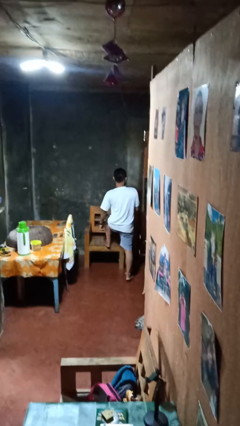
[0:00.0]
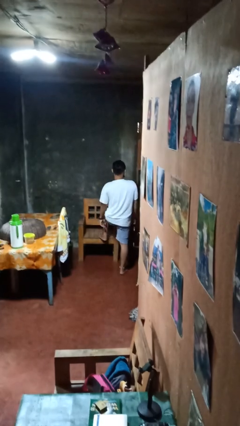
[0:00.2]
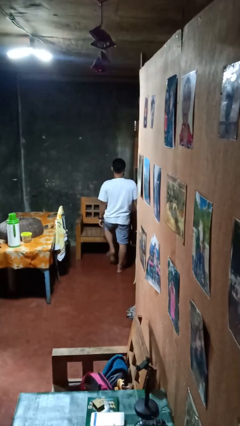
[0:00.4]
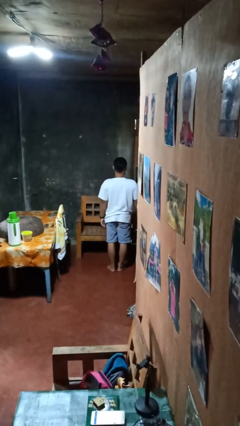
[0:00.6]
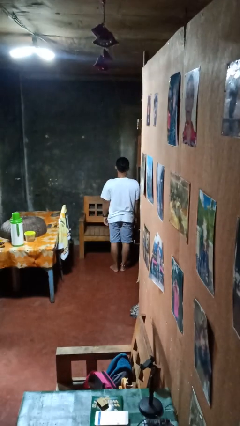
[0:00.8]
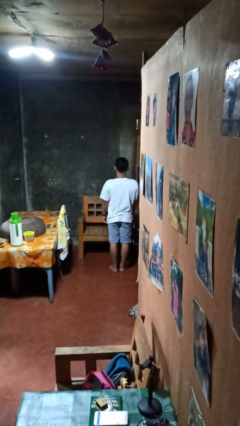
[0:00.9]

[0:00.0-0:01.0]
person climbs off chair

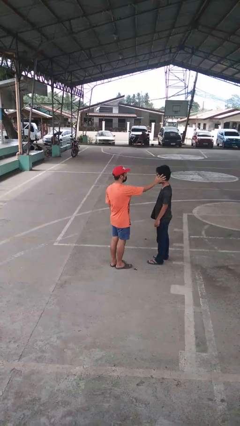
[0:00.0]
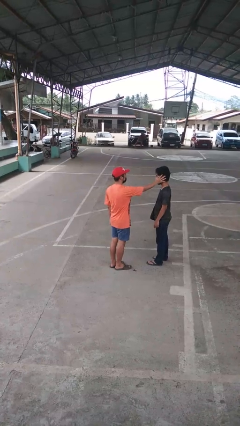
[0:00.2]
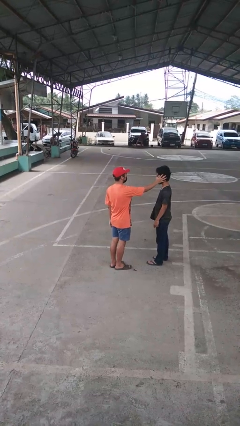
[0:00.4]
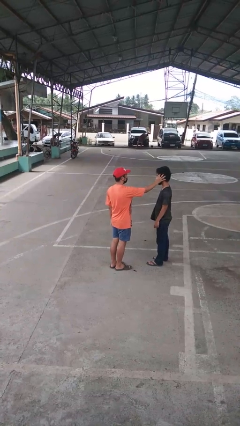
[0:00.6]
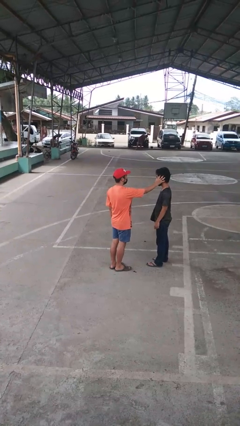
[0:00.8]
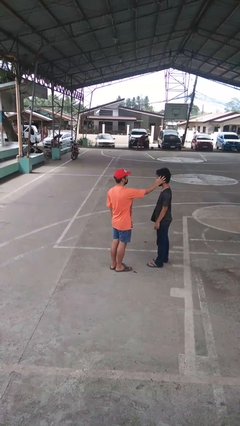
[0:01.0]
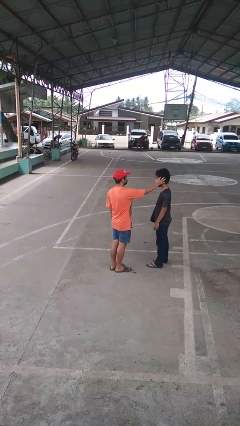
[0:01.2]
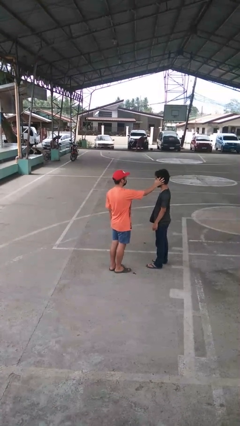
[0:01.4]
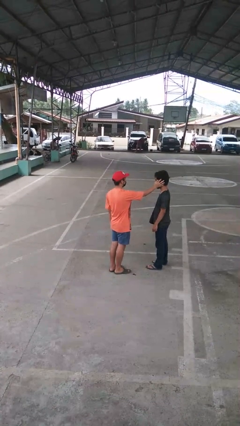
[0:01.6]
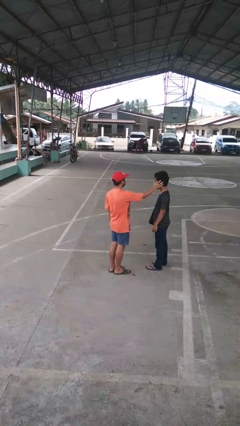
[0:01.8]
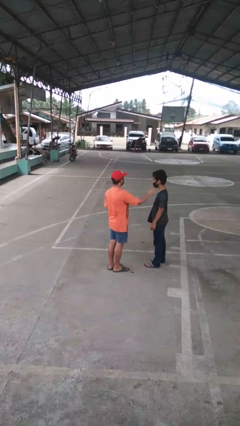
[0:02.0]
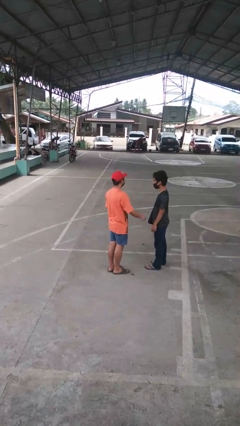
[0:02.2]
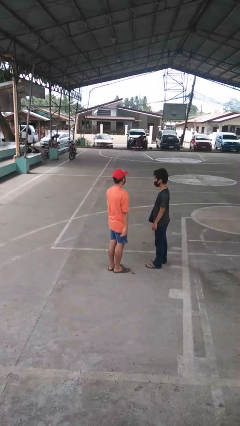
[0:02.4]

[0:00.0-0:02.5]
person touches face of person

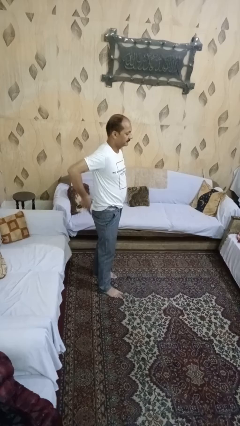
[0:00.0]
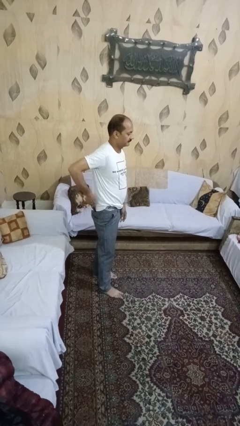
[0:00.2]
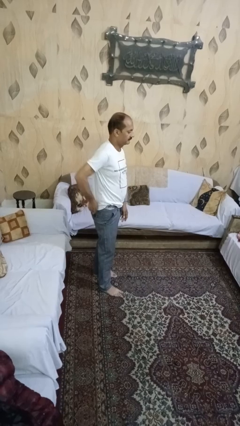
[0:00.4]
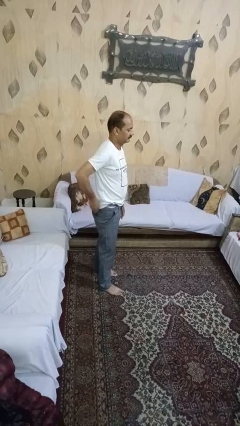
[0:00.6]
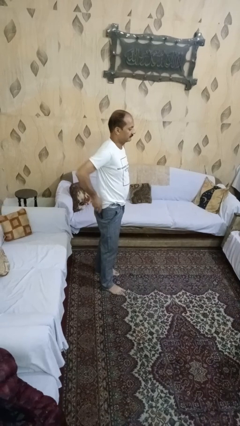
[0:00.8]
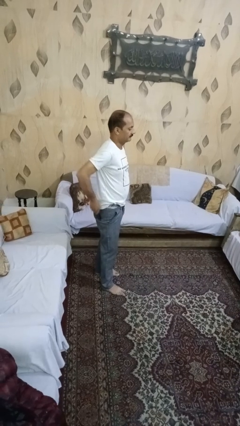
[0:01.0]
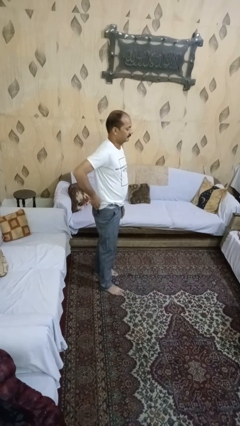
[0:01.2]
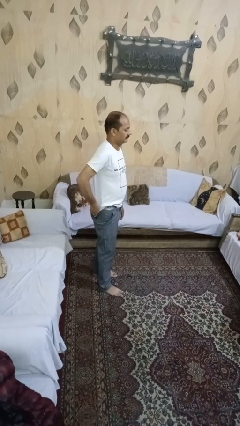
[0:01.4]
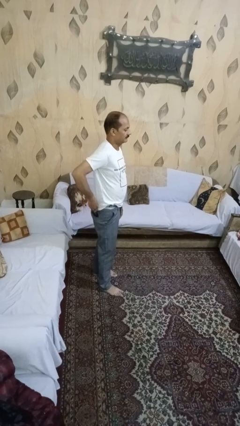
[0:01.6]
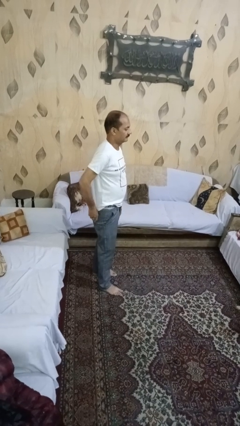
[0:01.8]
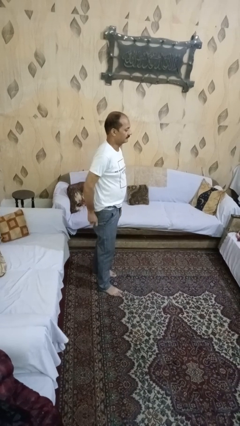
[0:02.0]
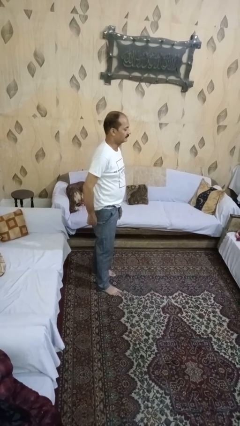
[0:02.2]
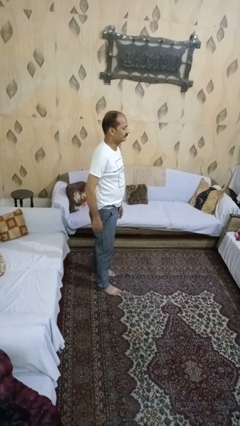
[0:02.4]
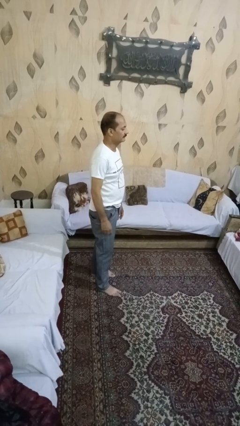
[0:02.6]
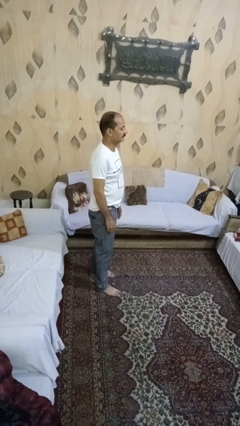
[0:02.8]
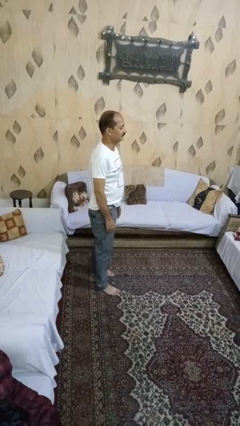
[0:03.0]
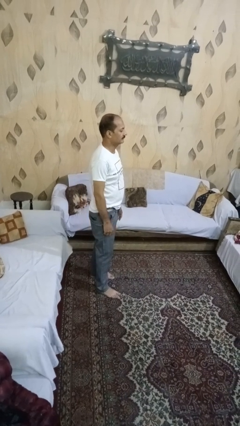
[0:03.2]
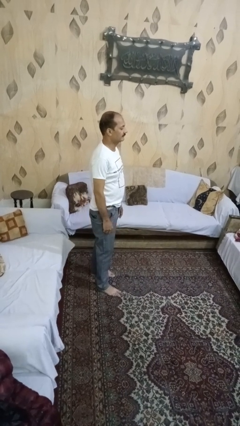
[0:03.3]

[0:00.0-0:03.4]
person puts phone into pocket

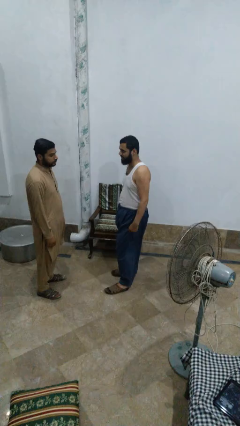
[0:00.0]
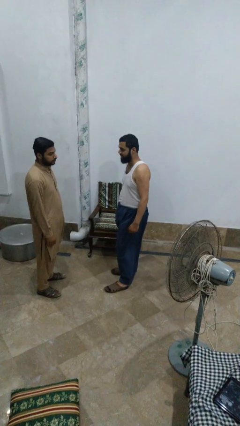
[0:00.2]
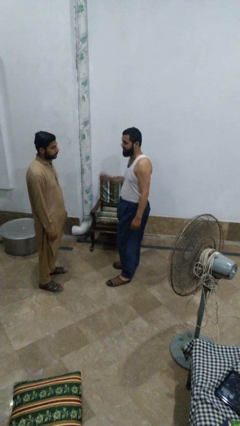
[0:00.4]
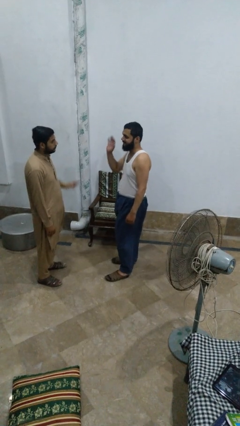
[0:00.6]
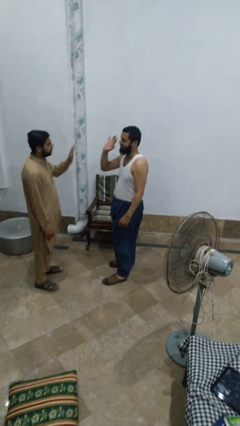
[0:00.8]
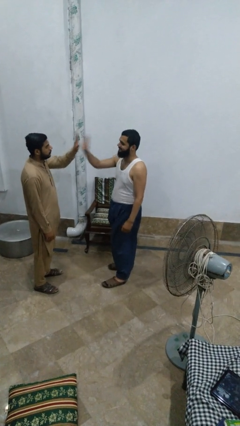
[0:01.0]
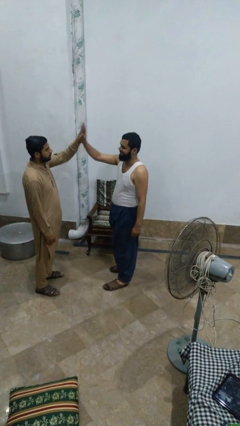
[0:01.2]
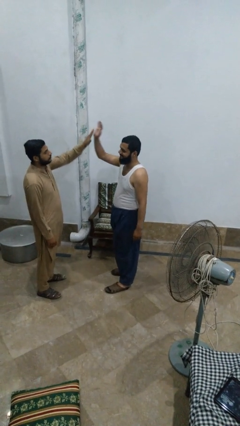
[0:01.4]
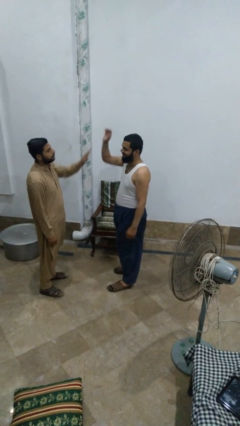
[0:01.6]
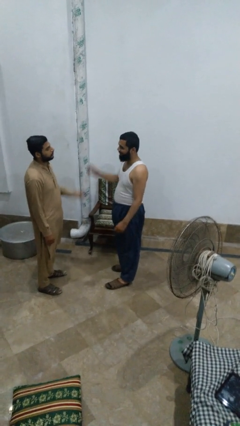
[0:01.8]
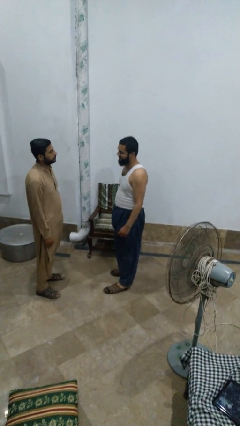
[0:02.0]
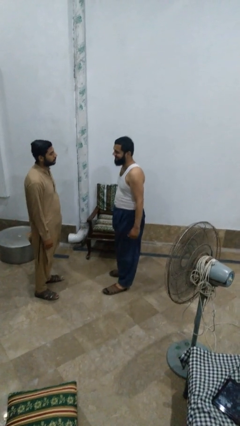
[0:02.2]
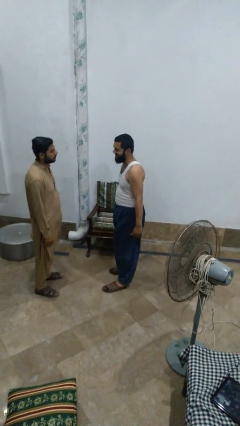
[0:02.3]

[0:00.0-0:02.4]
person highfives hand

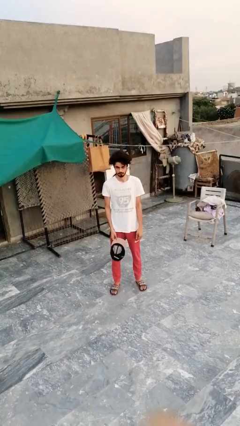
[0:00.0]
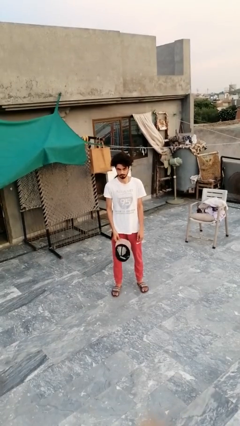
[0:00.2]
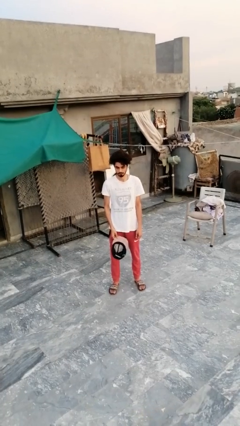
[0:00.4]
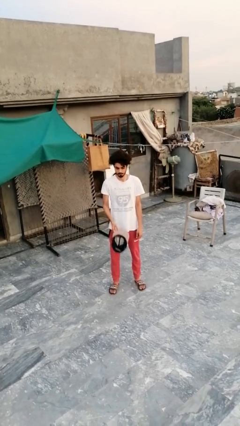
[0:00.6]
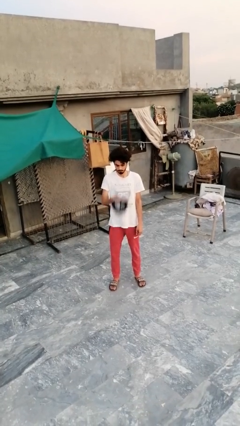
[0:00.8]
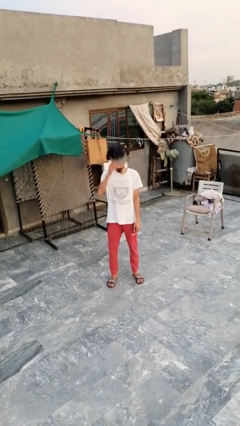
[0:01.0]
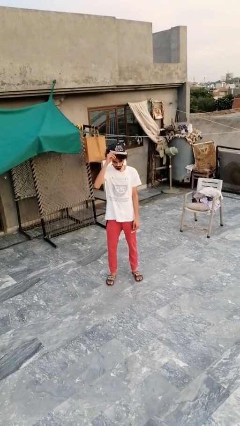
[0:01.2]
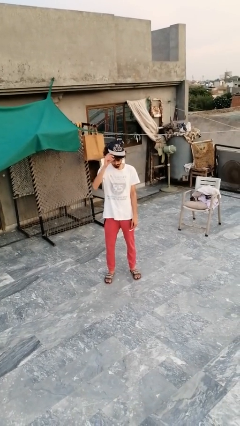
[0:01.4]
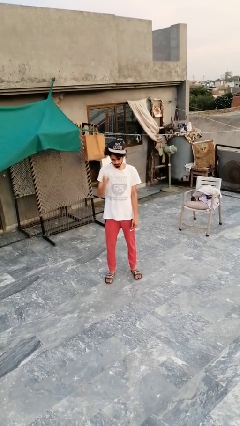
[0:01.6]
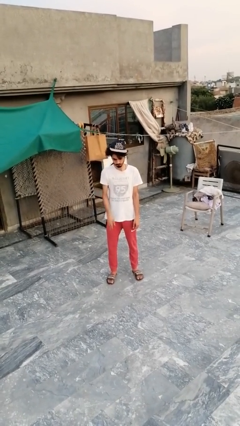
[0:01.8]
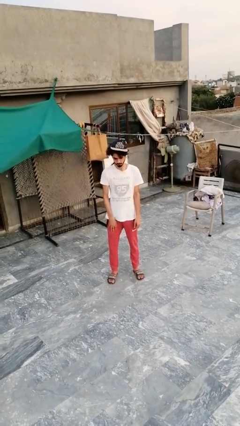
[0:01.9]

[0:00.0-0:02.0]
person puts on hat

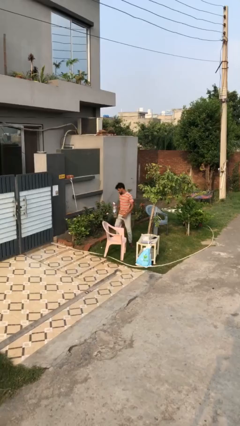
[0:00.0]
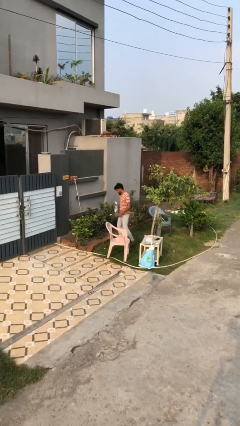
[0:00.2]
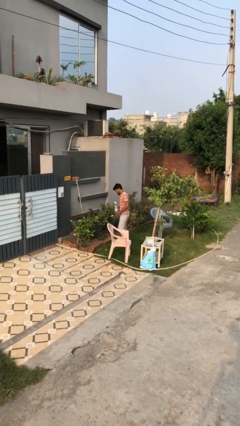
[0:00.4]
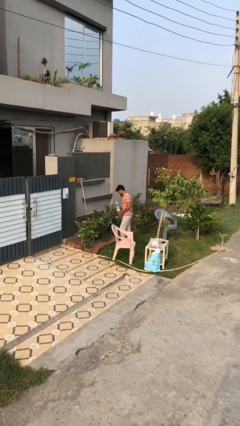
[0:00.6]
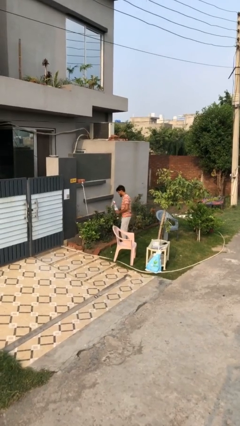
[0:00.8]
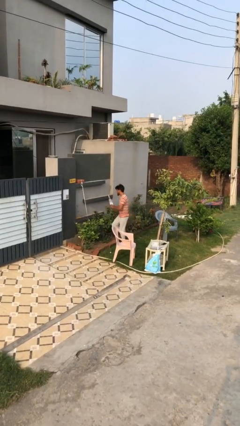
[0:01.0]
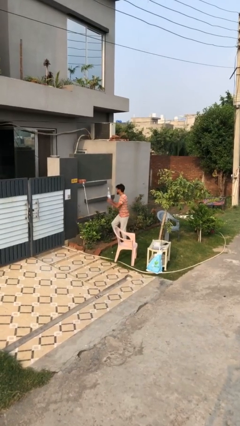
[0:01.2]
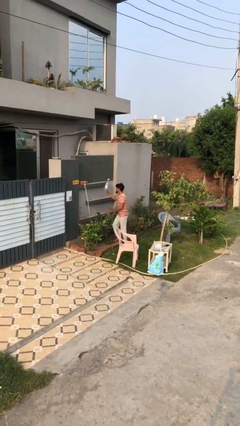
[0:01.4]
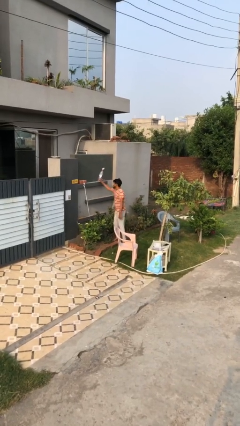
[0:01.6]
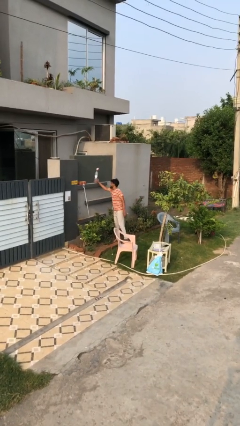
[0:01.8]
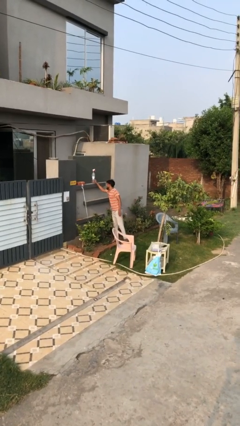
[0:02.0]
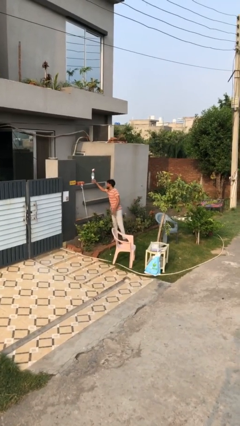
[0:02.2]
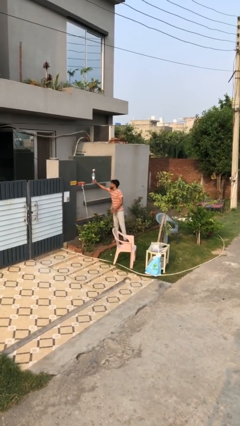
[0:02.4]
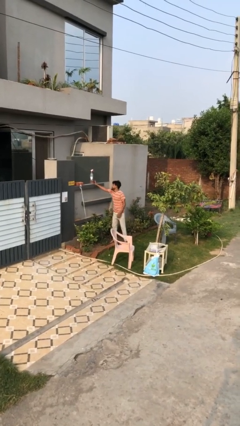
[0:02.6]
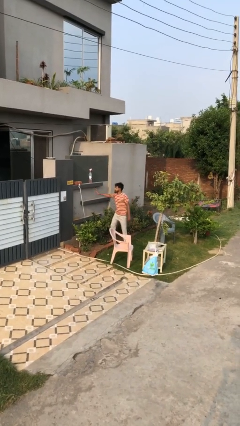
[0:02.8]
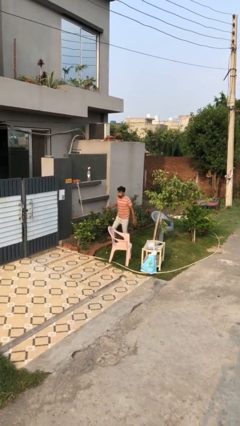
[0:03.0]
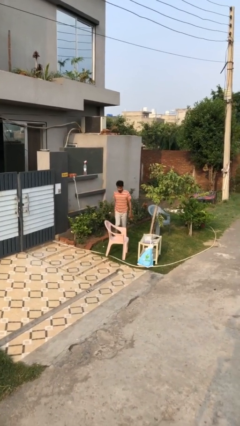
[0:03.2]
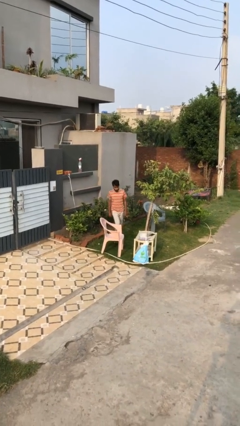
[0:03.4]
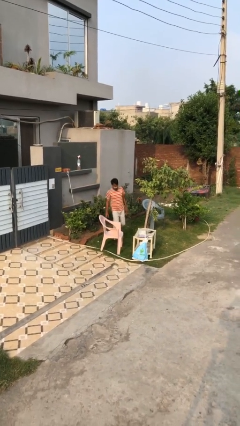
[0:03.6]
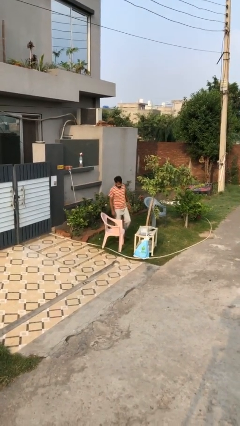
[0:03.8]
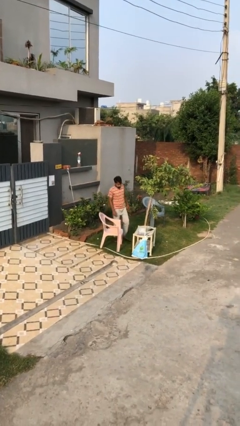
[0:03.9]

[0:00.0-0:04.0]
person puts down object on shelf

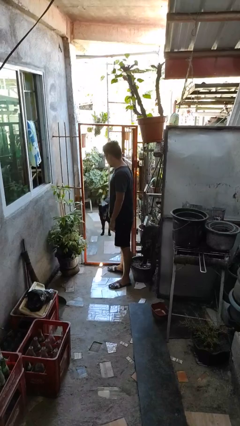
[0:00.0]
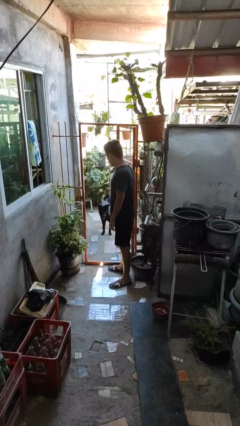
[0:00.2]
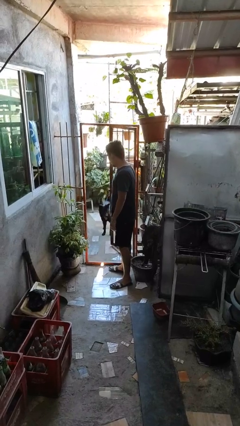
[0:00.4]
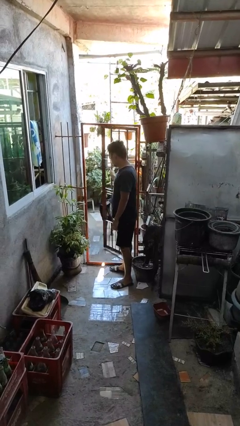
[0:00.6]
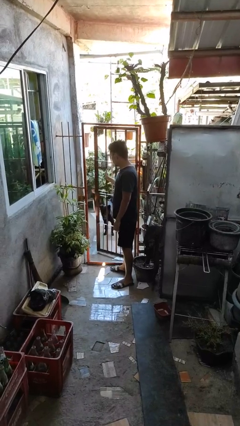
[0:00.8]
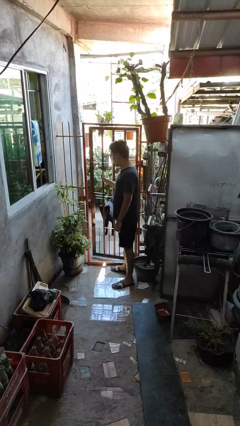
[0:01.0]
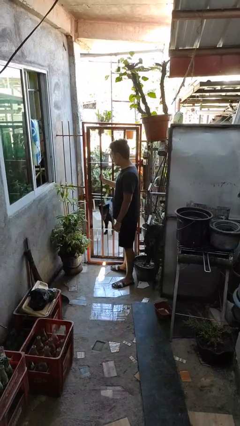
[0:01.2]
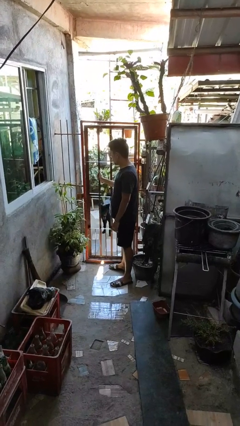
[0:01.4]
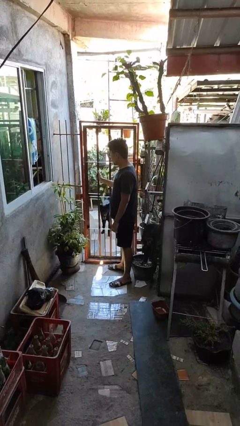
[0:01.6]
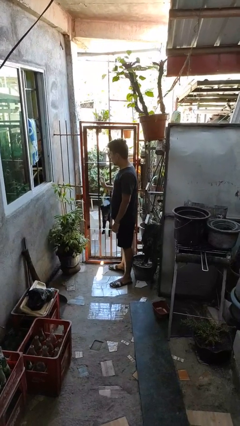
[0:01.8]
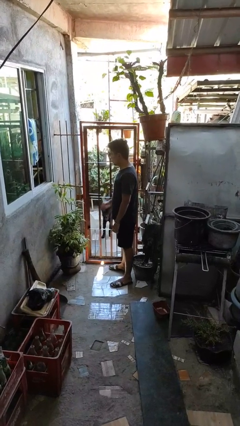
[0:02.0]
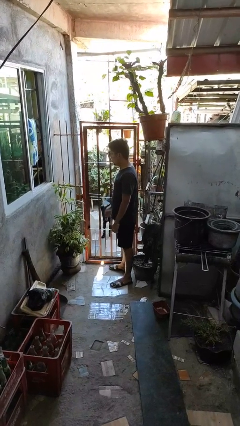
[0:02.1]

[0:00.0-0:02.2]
person closes gate
